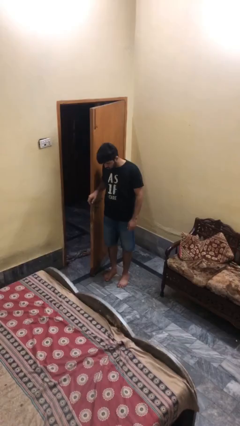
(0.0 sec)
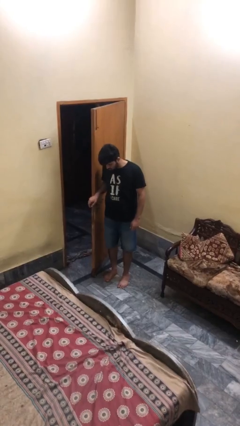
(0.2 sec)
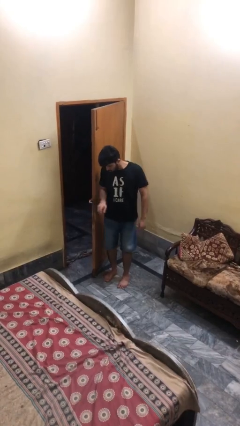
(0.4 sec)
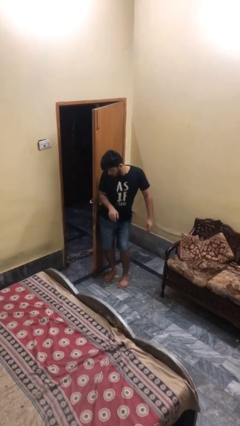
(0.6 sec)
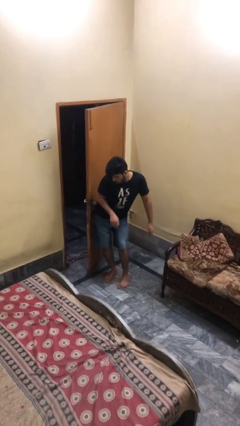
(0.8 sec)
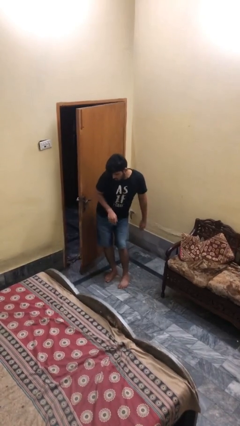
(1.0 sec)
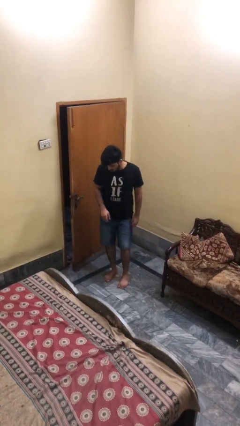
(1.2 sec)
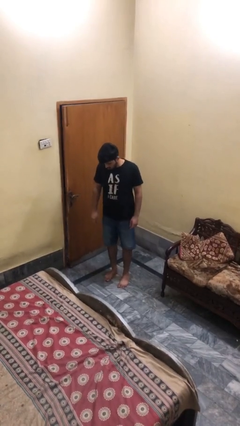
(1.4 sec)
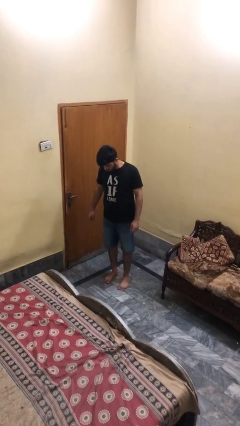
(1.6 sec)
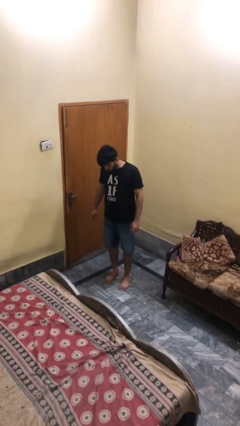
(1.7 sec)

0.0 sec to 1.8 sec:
person closes door with hip

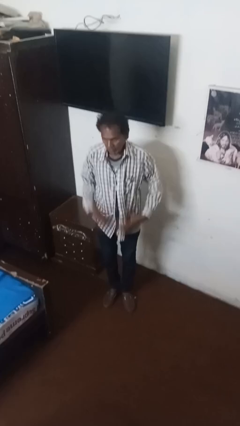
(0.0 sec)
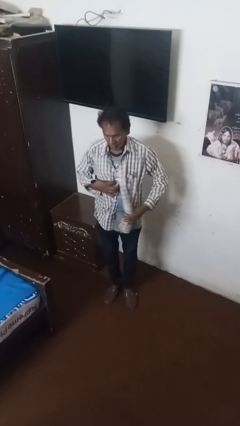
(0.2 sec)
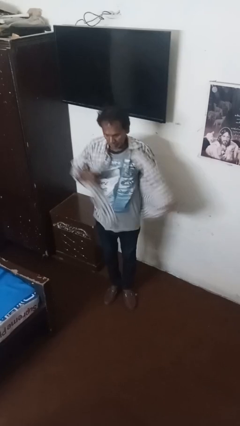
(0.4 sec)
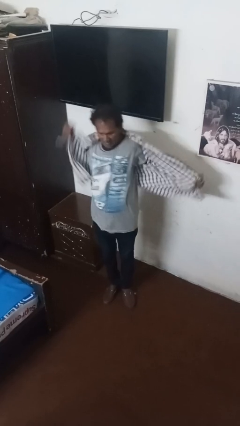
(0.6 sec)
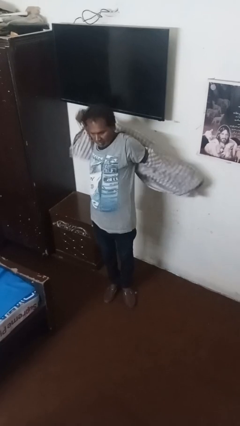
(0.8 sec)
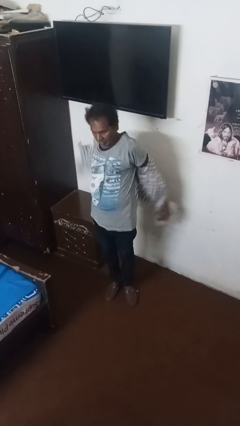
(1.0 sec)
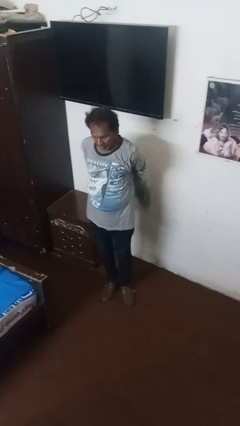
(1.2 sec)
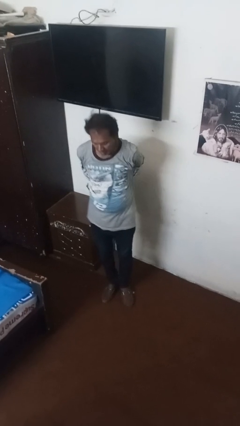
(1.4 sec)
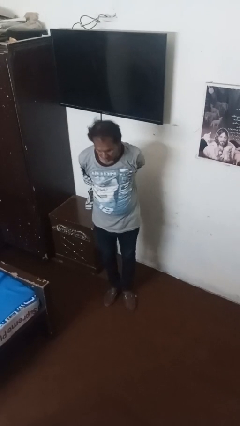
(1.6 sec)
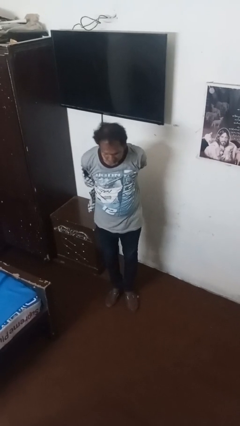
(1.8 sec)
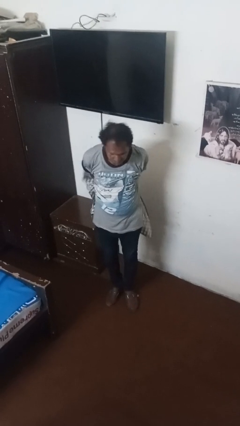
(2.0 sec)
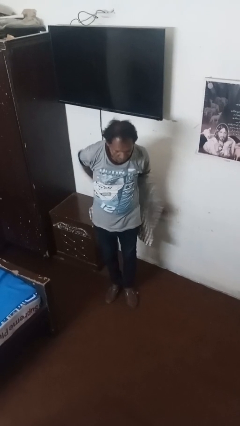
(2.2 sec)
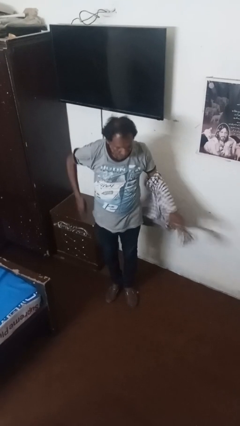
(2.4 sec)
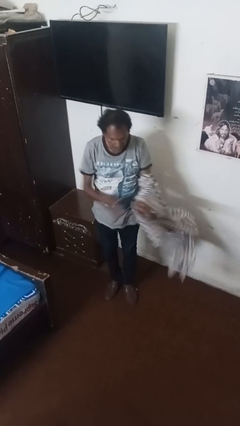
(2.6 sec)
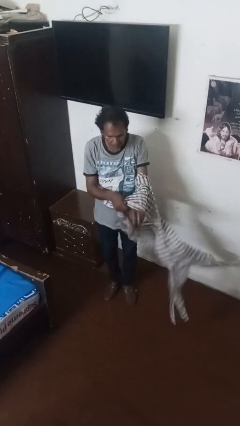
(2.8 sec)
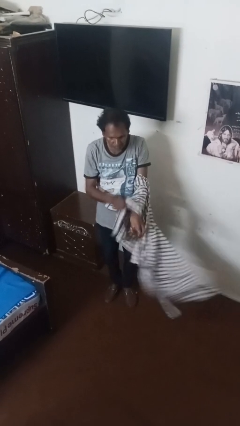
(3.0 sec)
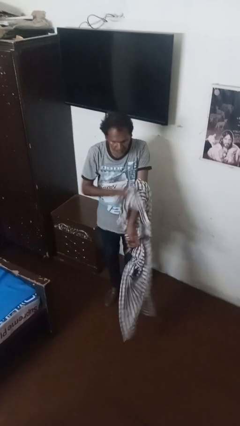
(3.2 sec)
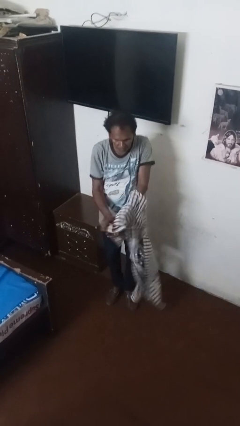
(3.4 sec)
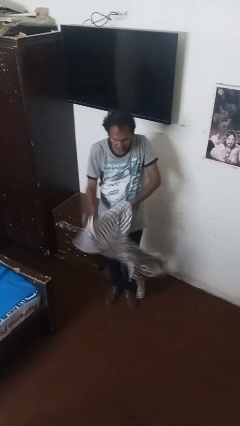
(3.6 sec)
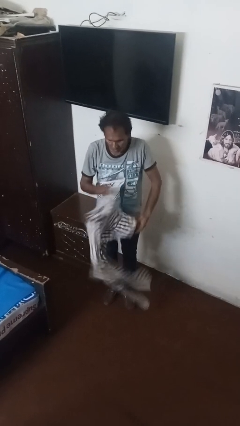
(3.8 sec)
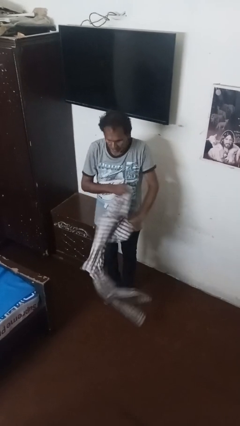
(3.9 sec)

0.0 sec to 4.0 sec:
person takes off shirt

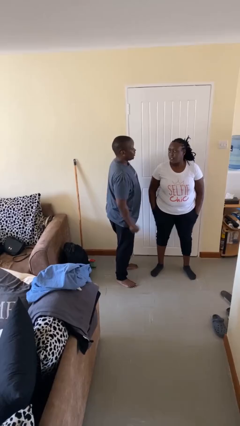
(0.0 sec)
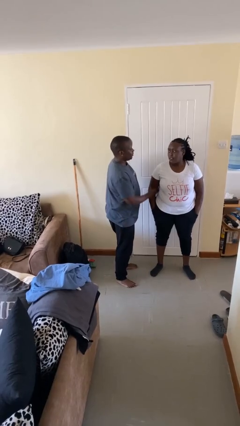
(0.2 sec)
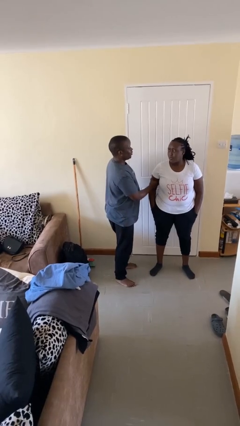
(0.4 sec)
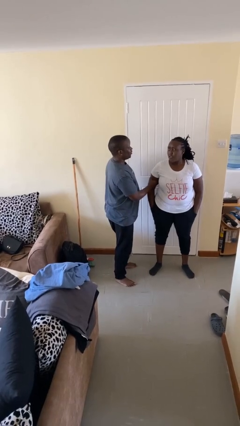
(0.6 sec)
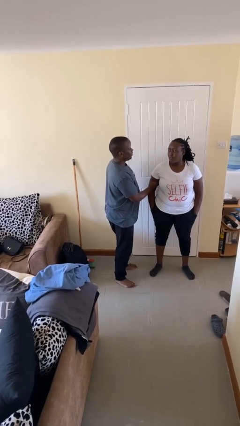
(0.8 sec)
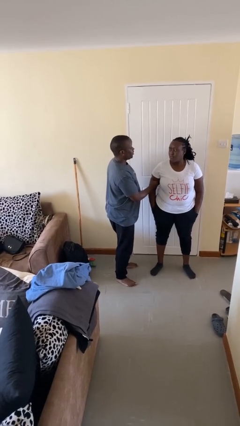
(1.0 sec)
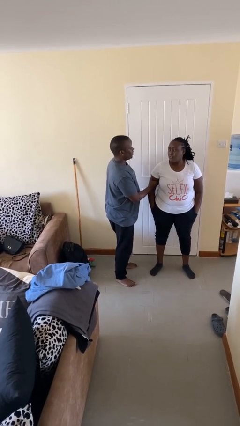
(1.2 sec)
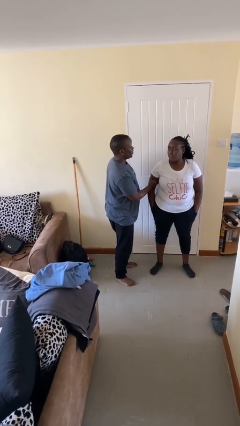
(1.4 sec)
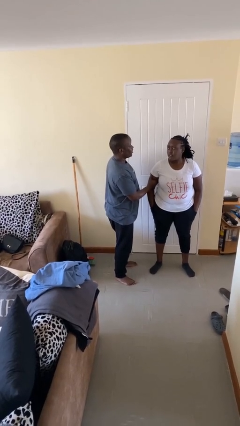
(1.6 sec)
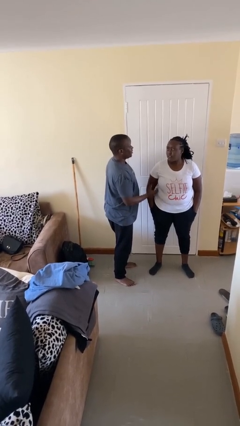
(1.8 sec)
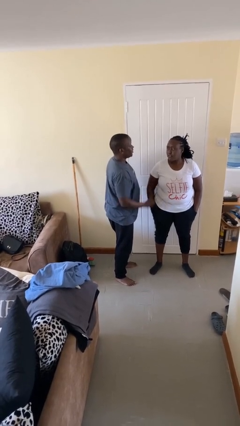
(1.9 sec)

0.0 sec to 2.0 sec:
person grabs person by bicep

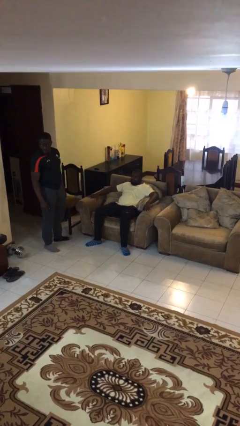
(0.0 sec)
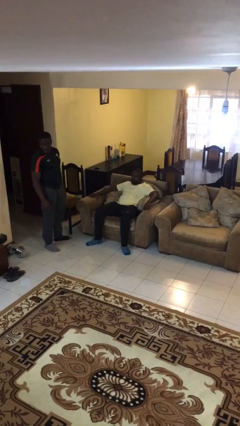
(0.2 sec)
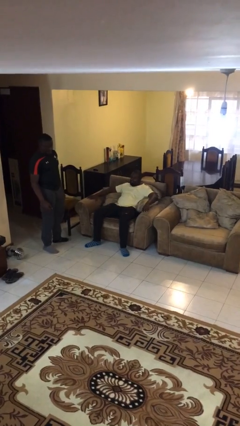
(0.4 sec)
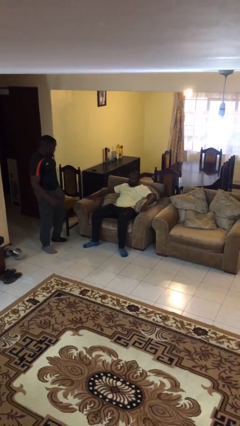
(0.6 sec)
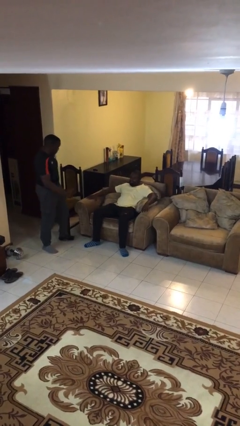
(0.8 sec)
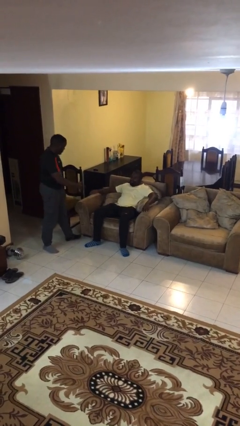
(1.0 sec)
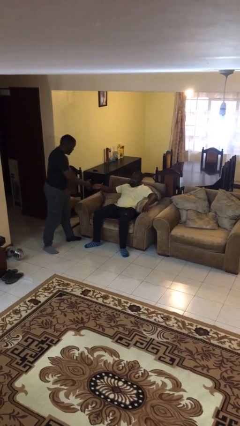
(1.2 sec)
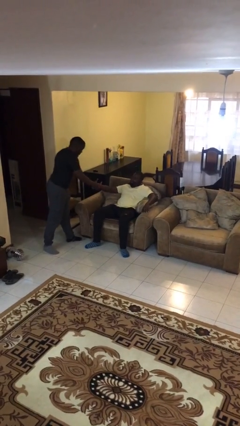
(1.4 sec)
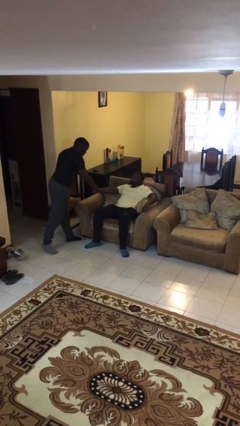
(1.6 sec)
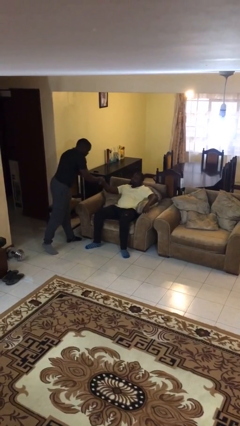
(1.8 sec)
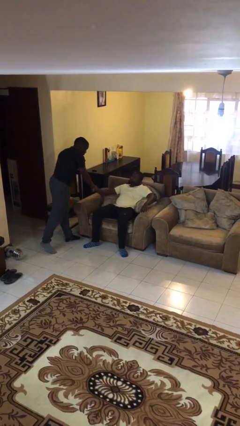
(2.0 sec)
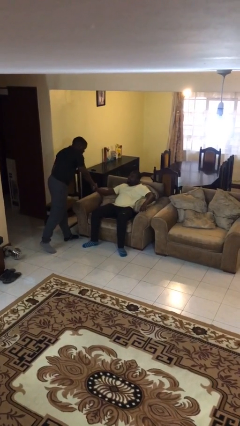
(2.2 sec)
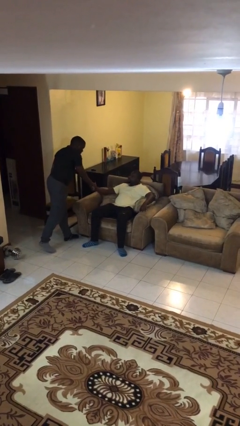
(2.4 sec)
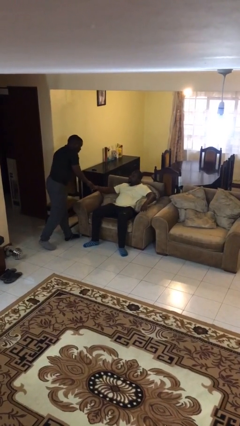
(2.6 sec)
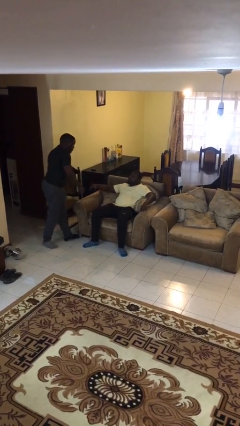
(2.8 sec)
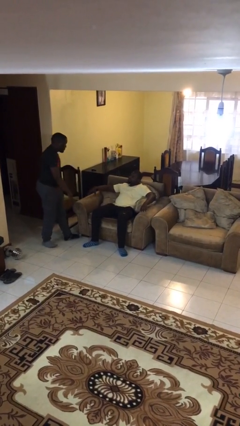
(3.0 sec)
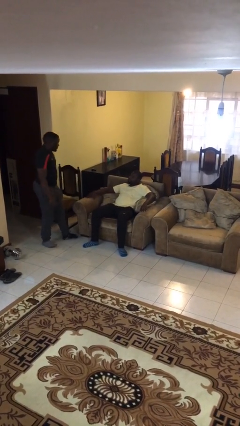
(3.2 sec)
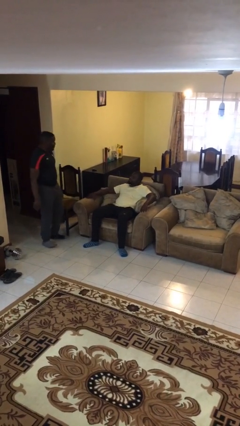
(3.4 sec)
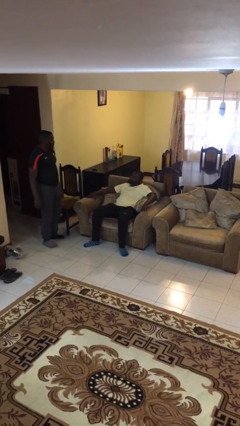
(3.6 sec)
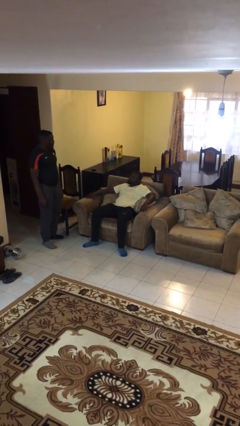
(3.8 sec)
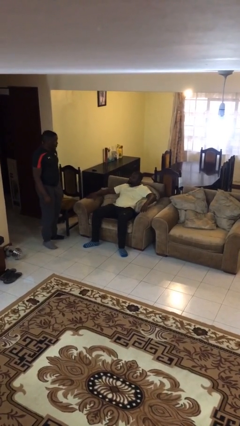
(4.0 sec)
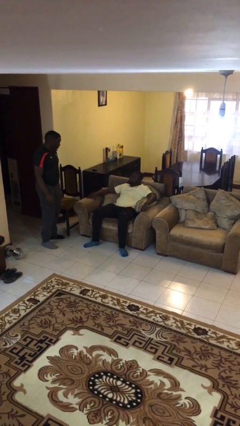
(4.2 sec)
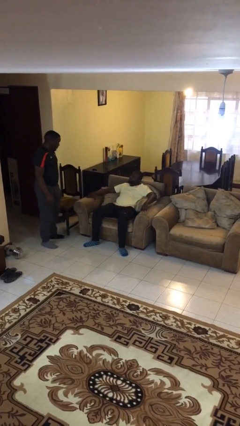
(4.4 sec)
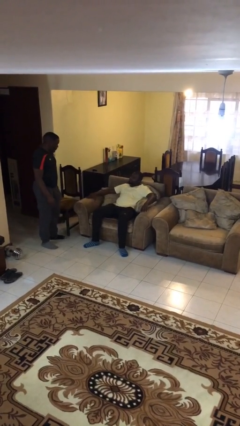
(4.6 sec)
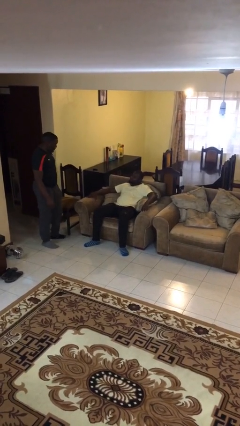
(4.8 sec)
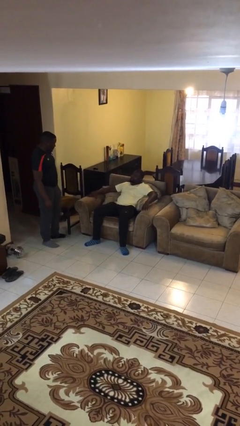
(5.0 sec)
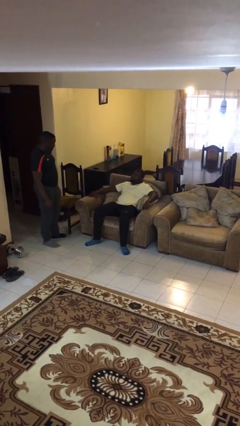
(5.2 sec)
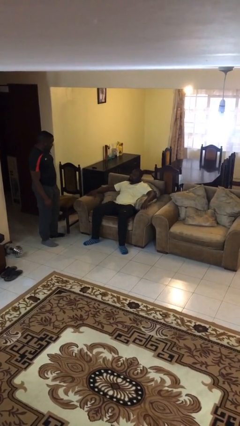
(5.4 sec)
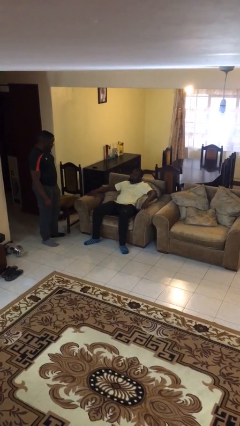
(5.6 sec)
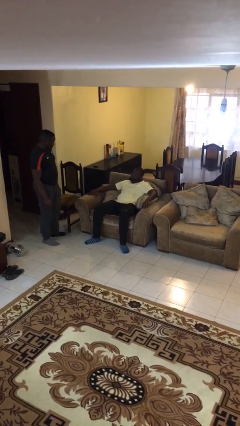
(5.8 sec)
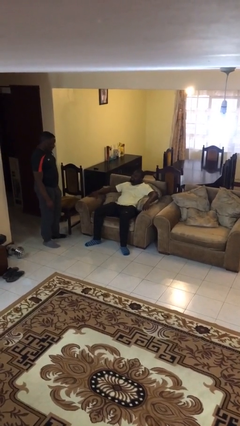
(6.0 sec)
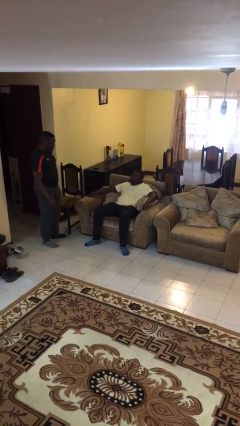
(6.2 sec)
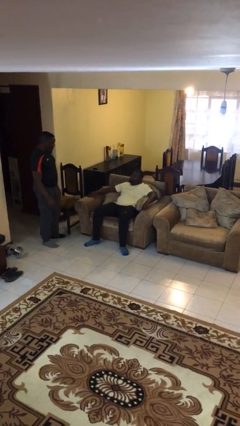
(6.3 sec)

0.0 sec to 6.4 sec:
person shakes hand

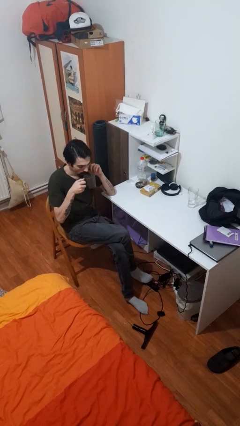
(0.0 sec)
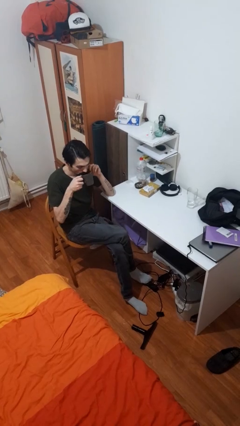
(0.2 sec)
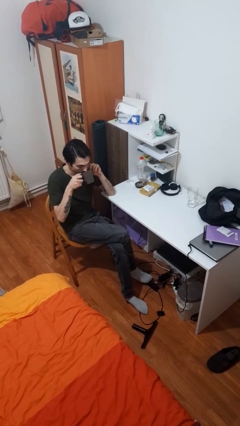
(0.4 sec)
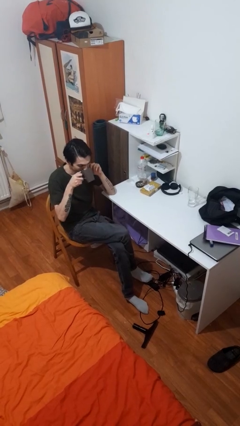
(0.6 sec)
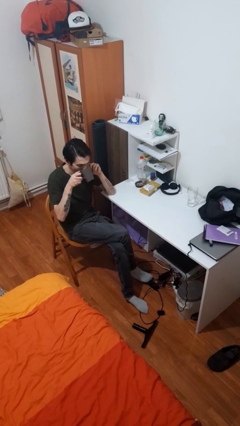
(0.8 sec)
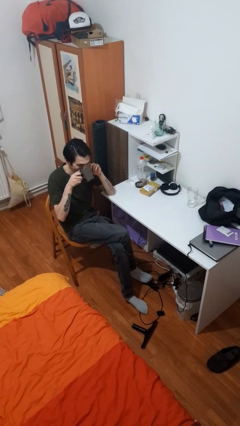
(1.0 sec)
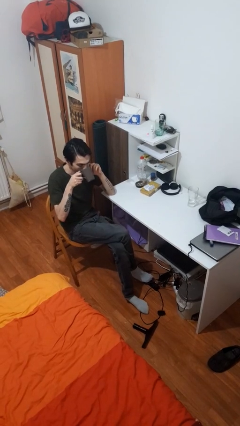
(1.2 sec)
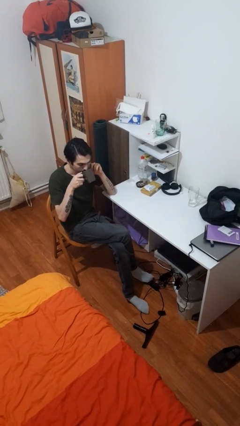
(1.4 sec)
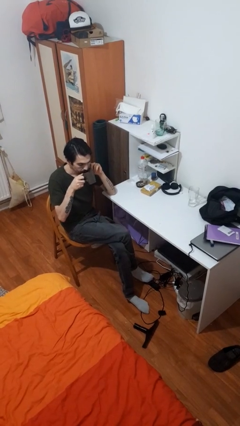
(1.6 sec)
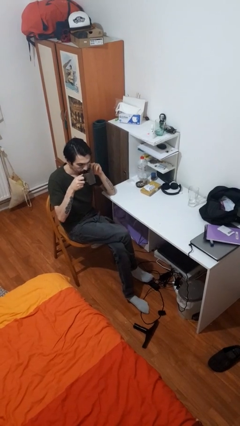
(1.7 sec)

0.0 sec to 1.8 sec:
person drinks from mug

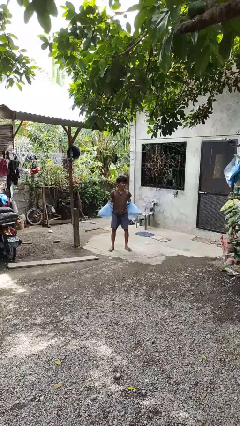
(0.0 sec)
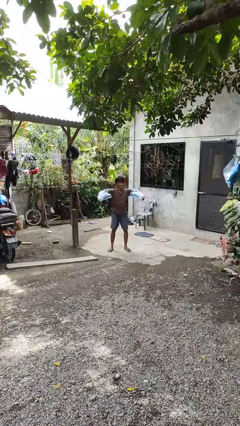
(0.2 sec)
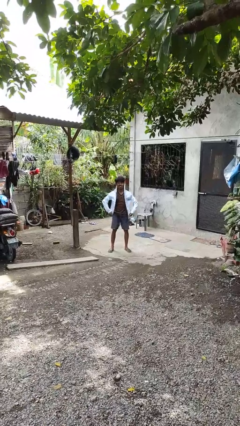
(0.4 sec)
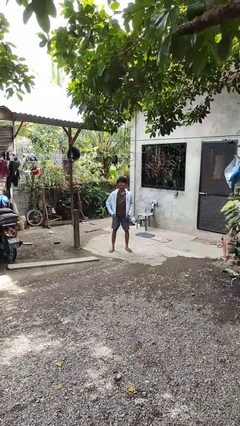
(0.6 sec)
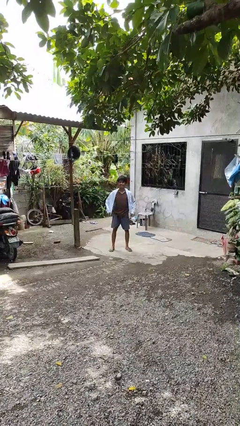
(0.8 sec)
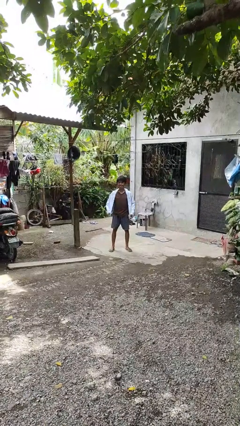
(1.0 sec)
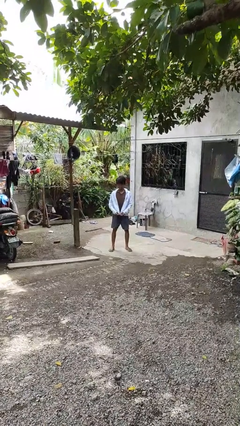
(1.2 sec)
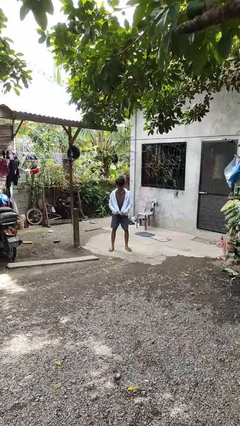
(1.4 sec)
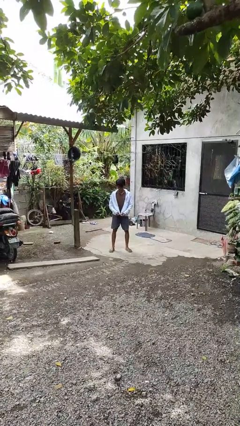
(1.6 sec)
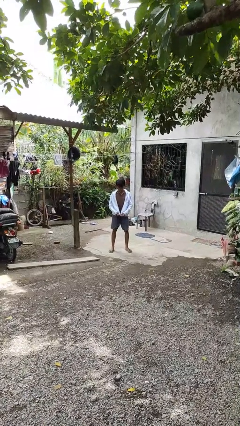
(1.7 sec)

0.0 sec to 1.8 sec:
person puts on jacket
